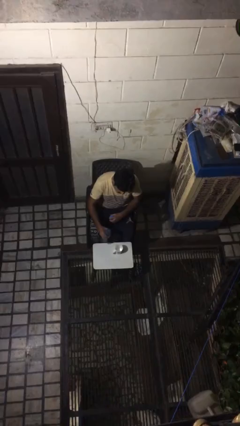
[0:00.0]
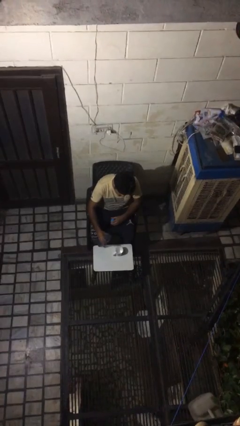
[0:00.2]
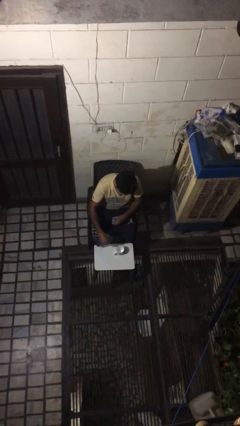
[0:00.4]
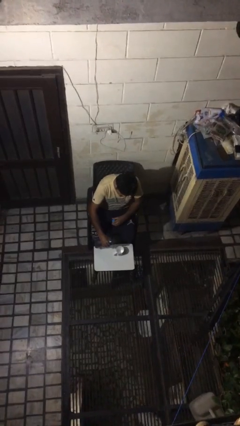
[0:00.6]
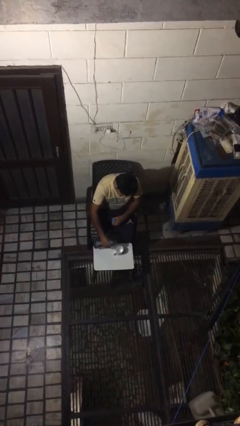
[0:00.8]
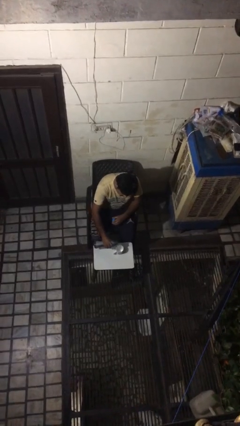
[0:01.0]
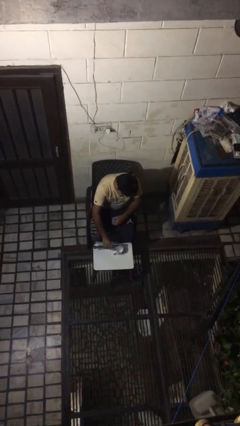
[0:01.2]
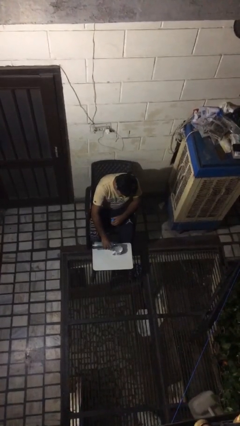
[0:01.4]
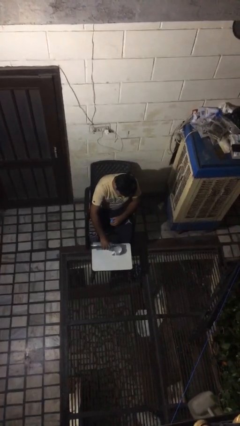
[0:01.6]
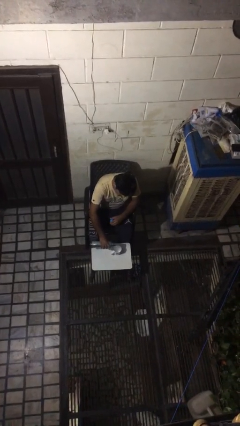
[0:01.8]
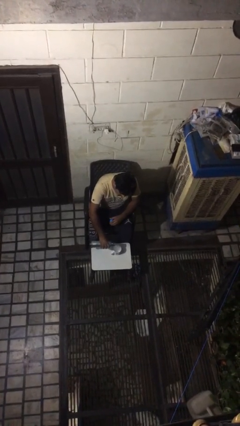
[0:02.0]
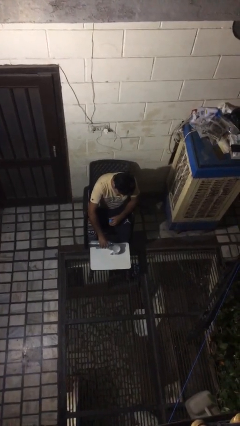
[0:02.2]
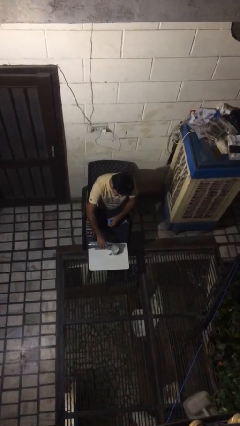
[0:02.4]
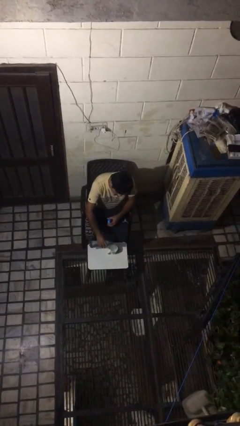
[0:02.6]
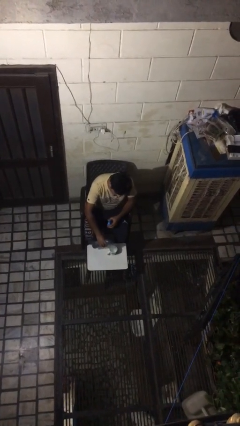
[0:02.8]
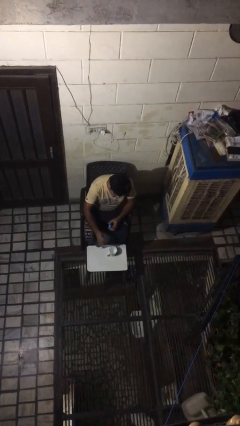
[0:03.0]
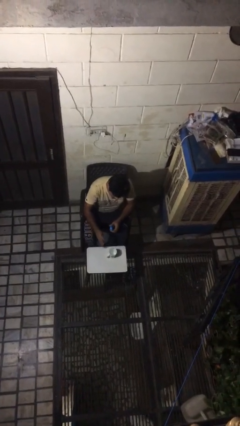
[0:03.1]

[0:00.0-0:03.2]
person pours liquid into cup

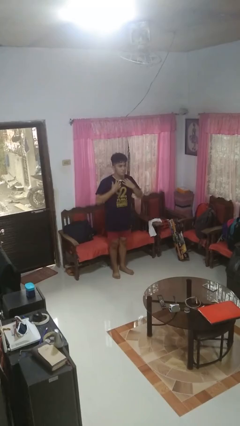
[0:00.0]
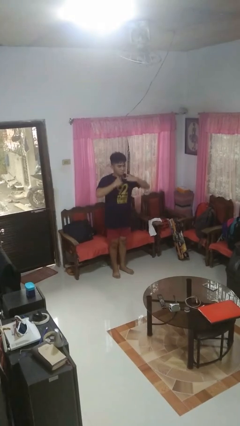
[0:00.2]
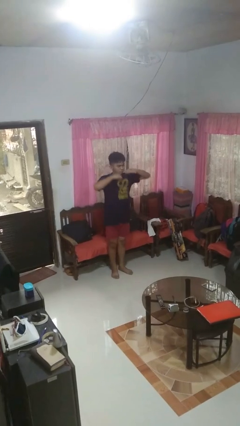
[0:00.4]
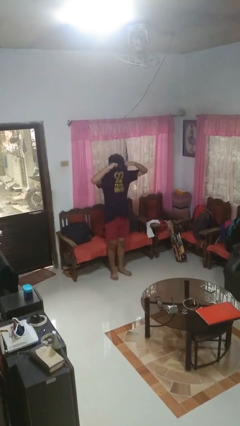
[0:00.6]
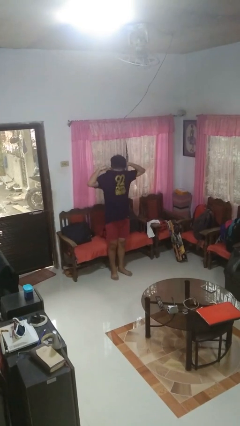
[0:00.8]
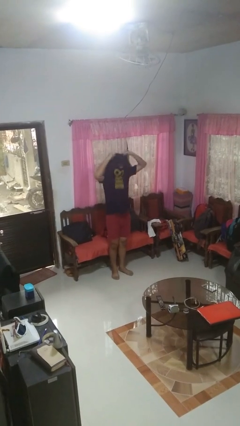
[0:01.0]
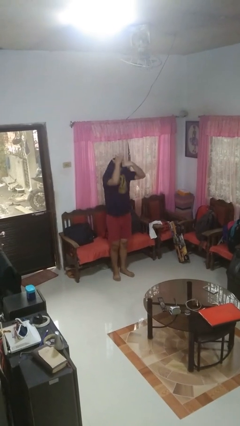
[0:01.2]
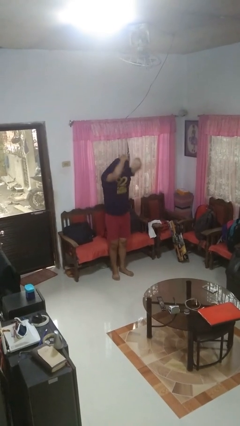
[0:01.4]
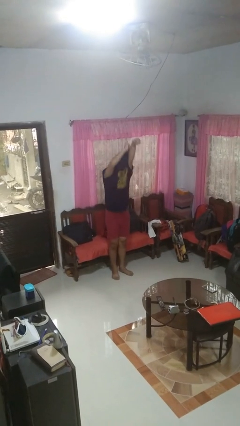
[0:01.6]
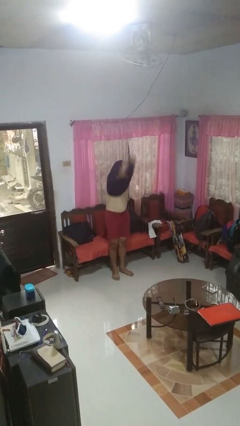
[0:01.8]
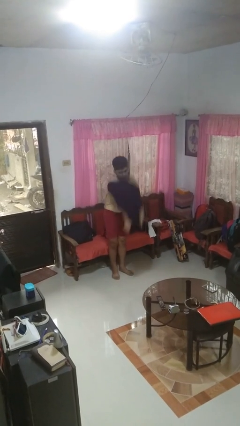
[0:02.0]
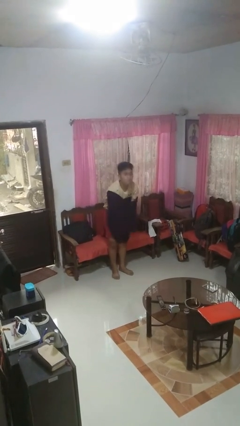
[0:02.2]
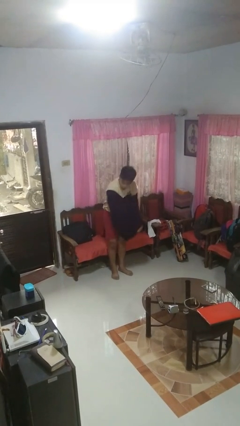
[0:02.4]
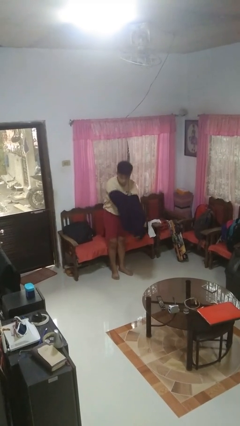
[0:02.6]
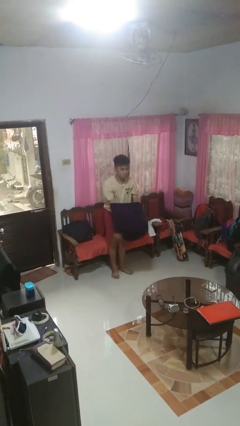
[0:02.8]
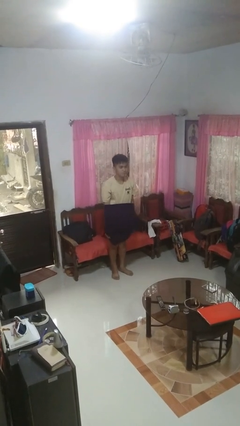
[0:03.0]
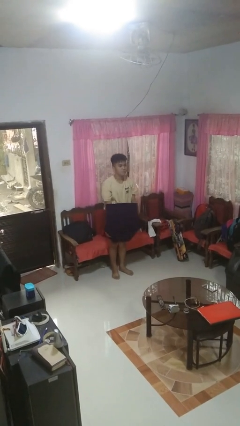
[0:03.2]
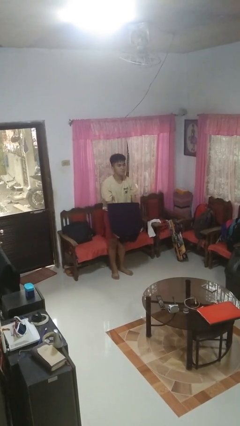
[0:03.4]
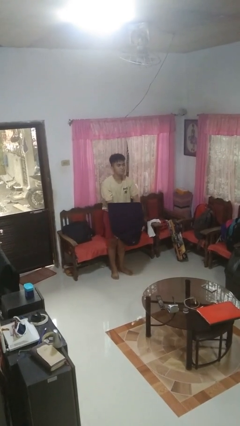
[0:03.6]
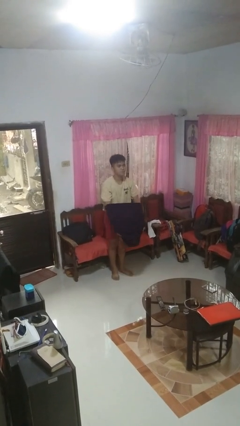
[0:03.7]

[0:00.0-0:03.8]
person takes off shirt

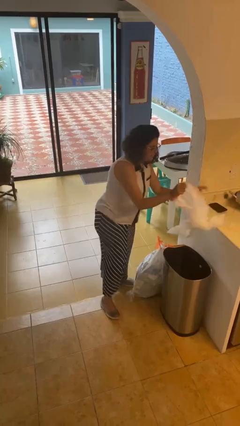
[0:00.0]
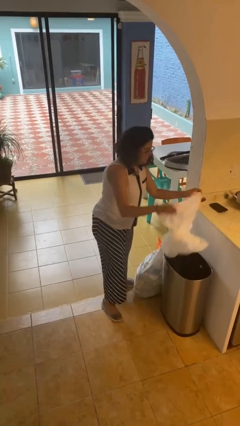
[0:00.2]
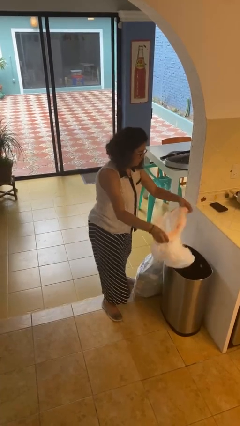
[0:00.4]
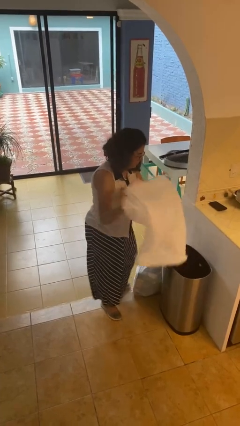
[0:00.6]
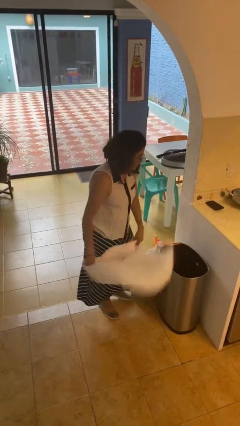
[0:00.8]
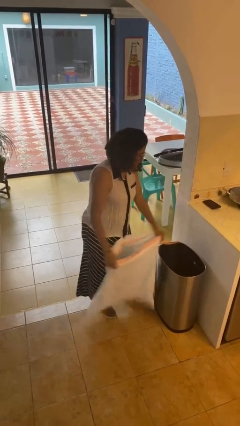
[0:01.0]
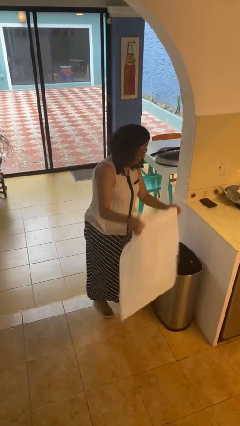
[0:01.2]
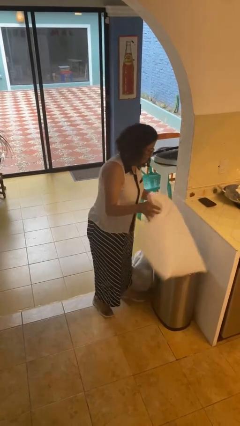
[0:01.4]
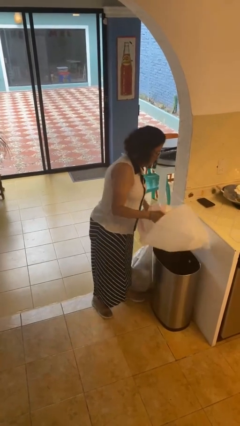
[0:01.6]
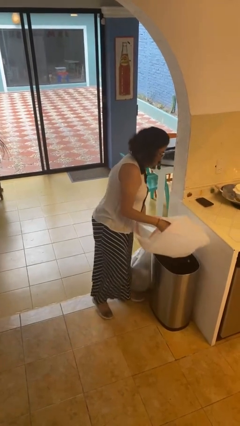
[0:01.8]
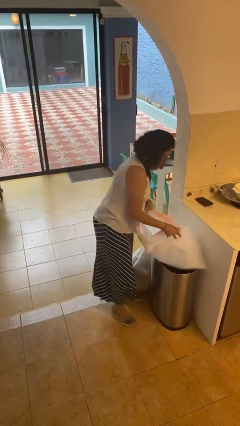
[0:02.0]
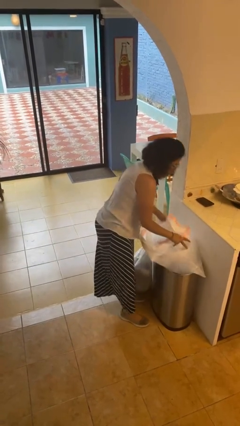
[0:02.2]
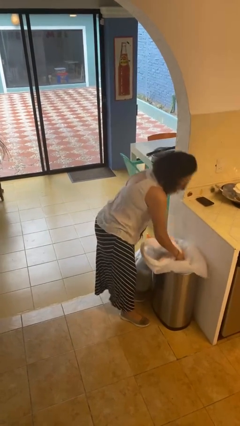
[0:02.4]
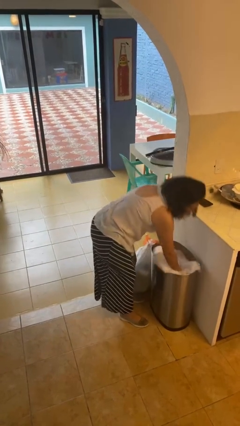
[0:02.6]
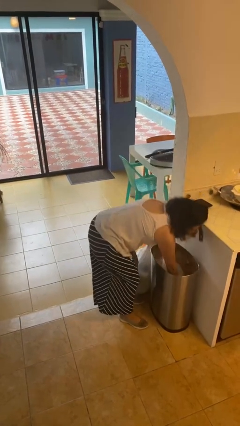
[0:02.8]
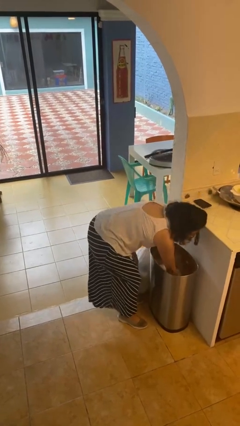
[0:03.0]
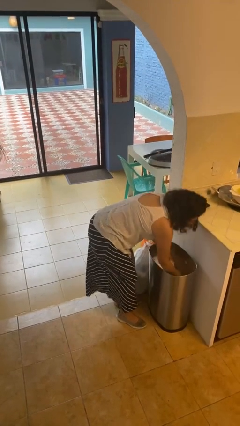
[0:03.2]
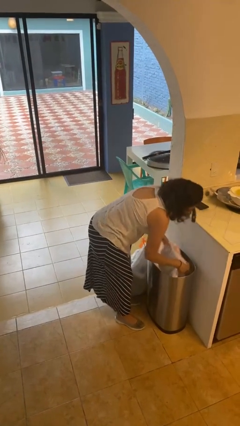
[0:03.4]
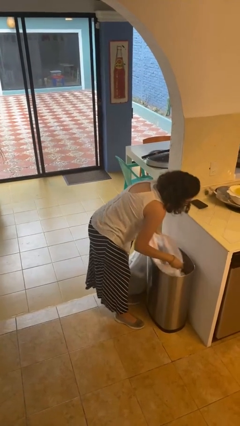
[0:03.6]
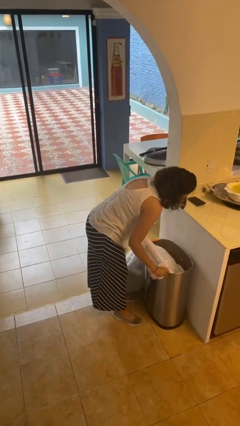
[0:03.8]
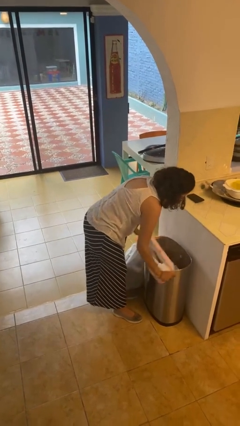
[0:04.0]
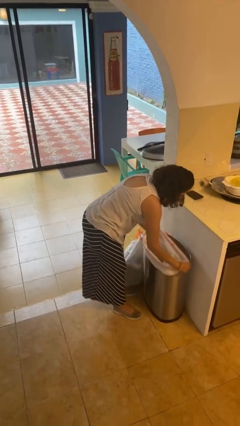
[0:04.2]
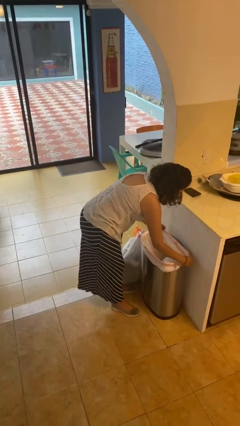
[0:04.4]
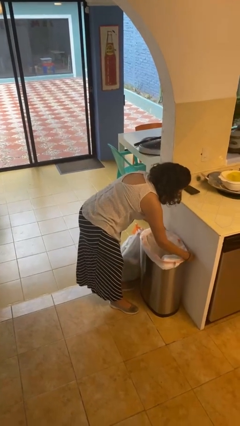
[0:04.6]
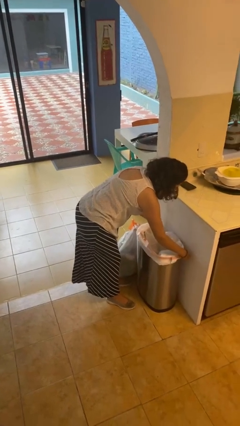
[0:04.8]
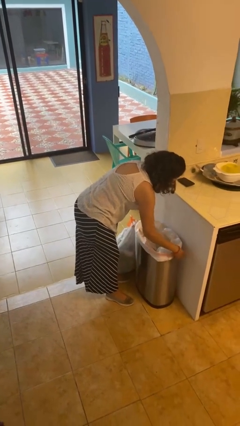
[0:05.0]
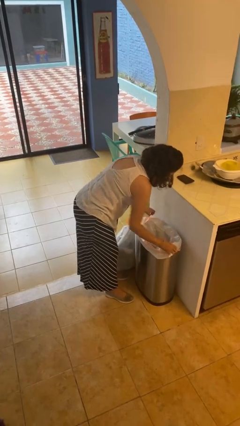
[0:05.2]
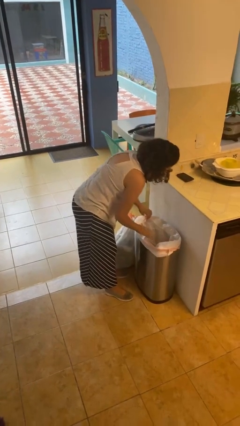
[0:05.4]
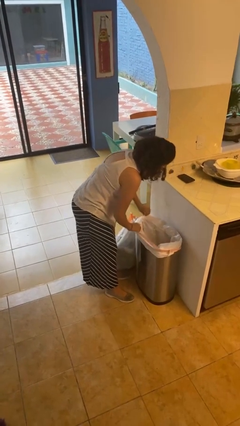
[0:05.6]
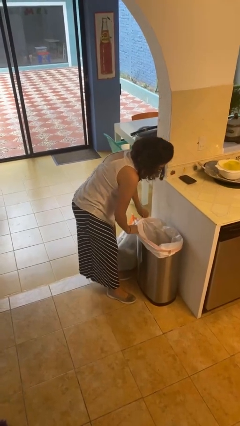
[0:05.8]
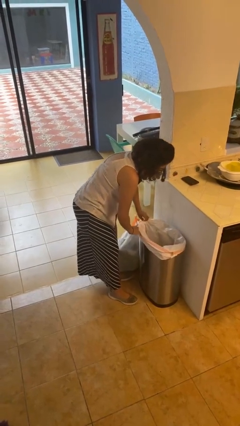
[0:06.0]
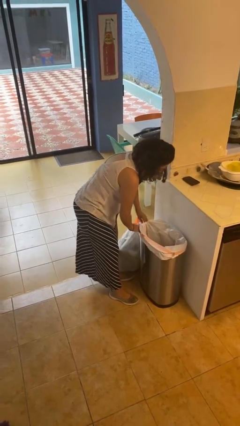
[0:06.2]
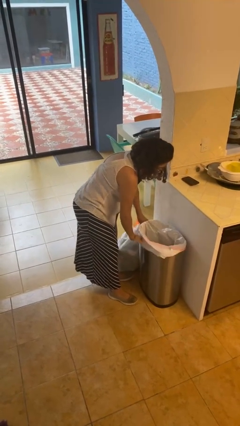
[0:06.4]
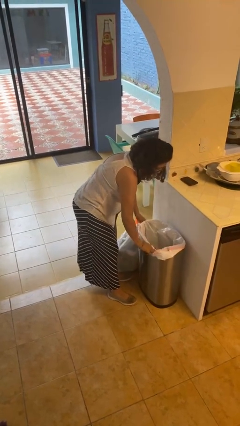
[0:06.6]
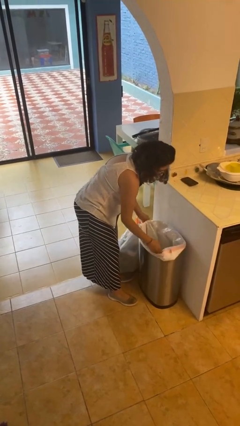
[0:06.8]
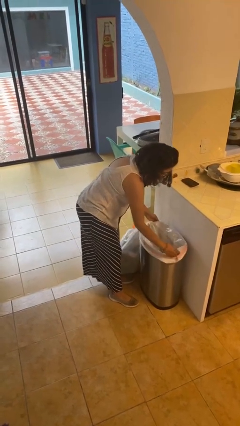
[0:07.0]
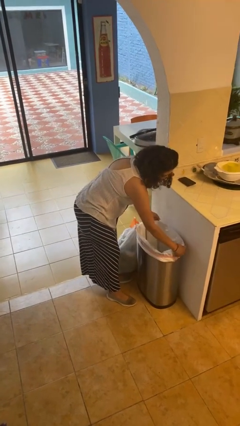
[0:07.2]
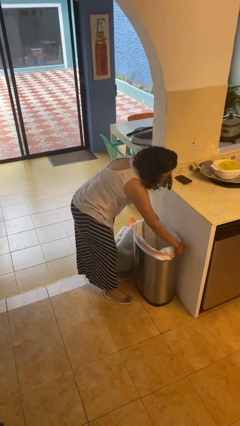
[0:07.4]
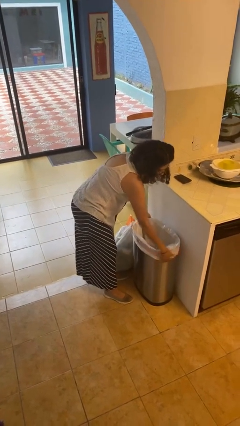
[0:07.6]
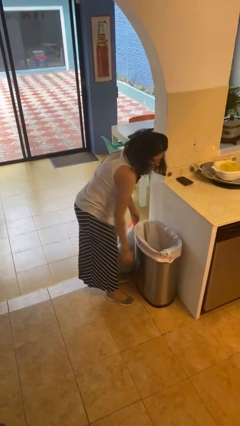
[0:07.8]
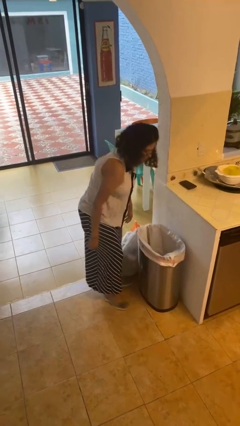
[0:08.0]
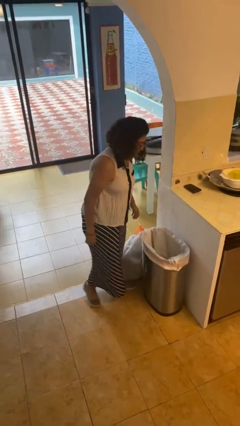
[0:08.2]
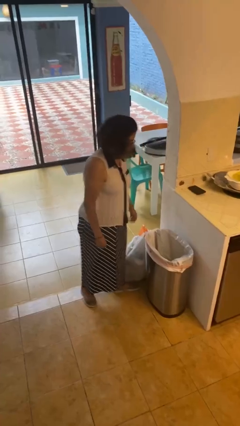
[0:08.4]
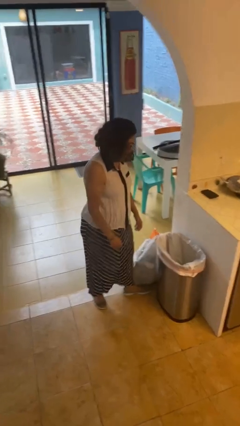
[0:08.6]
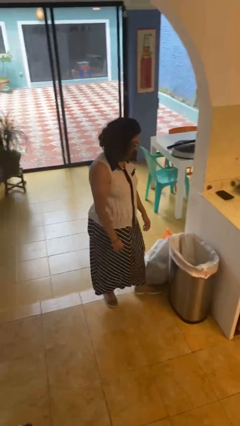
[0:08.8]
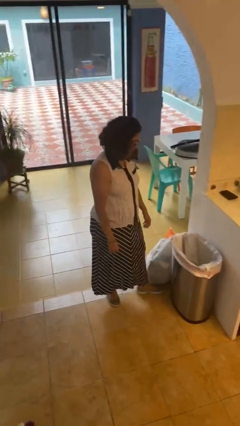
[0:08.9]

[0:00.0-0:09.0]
person inserts trashbag into trashcan

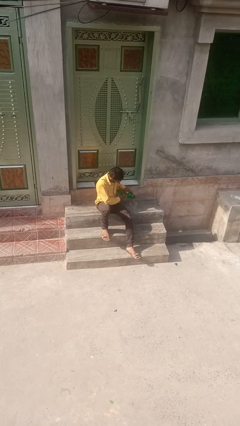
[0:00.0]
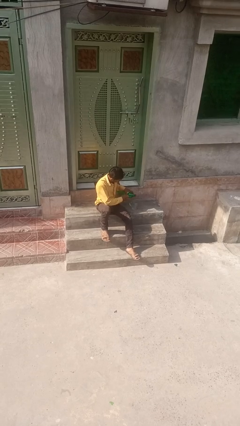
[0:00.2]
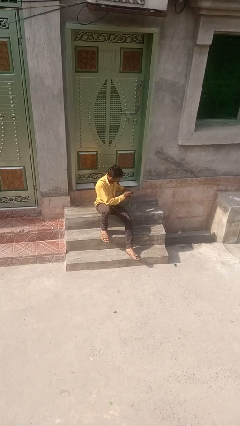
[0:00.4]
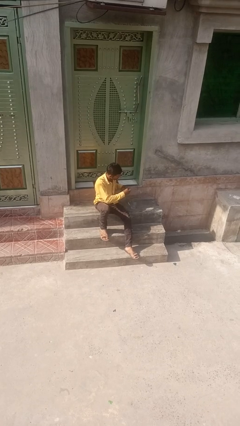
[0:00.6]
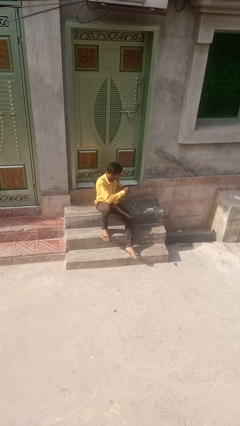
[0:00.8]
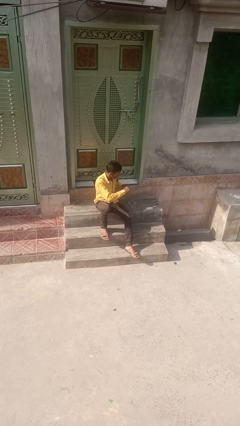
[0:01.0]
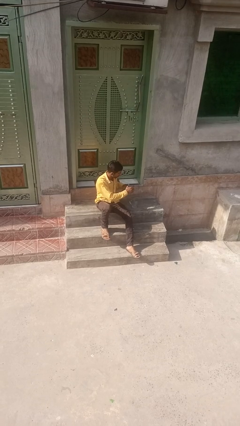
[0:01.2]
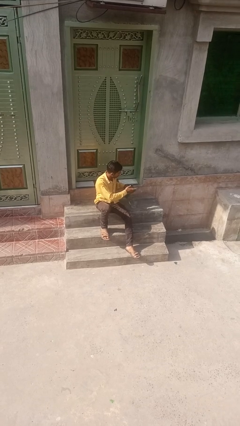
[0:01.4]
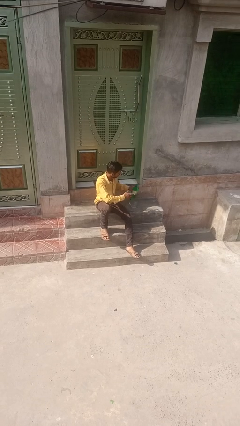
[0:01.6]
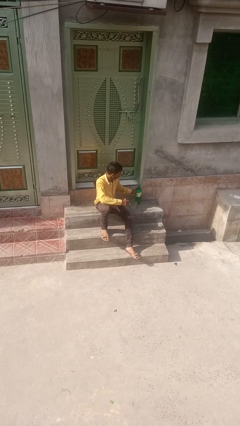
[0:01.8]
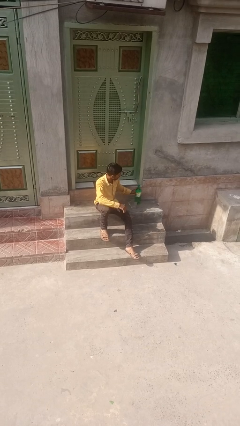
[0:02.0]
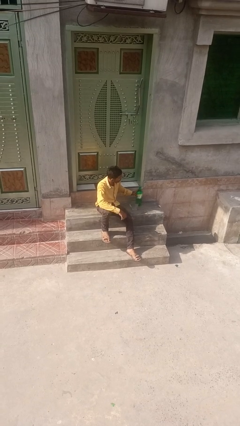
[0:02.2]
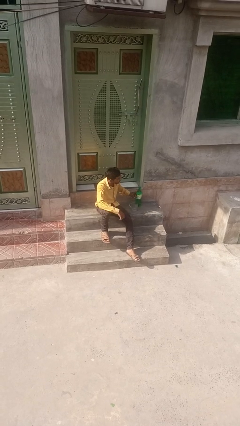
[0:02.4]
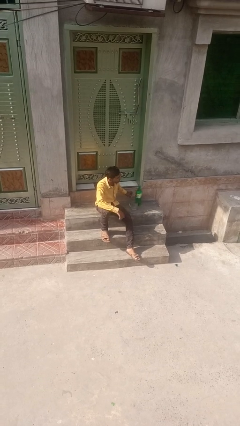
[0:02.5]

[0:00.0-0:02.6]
person screws lid to bottle
